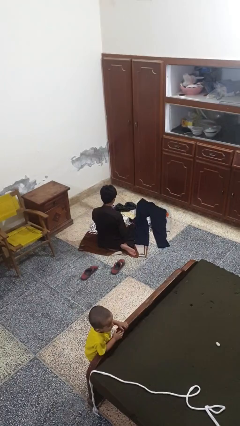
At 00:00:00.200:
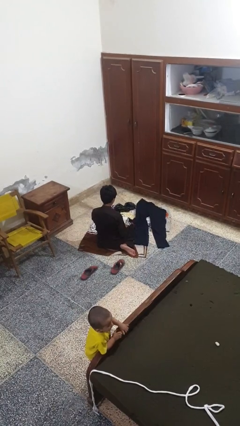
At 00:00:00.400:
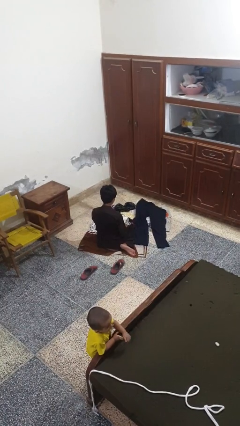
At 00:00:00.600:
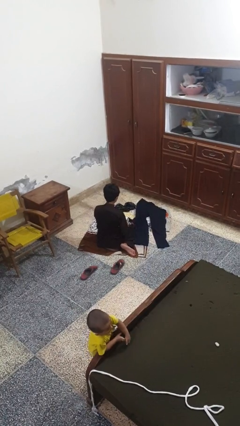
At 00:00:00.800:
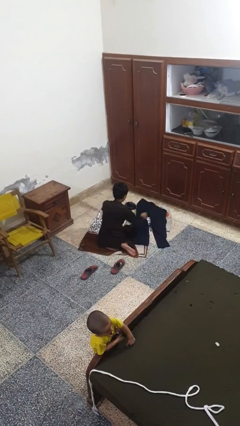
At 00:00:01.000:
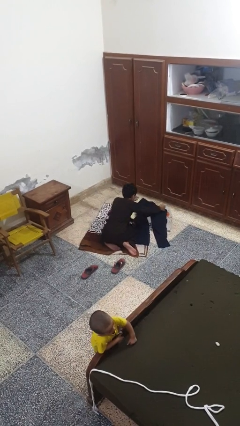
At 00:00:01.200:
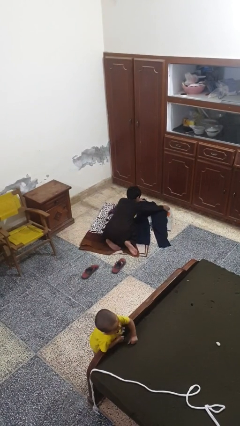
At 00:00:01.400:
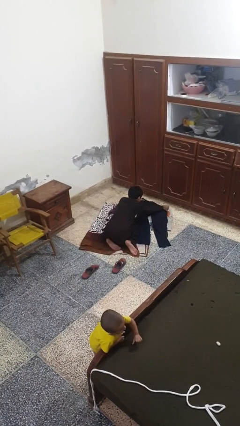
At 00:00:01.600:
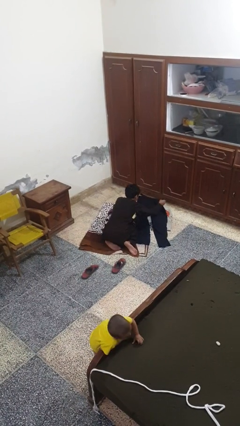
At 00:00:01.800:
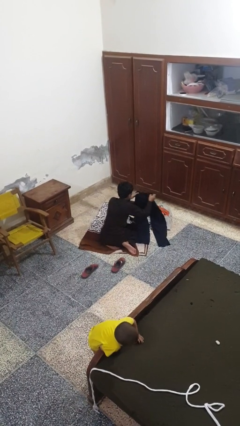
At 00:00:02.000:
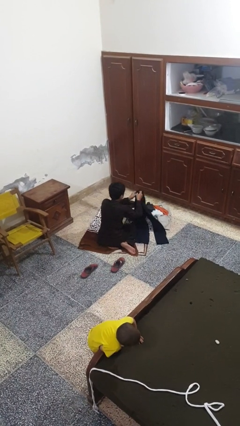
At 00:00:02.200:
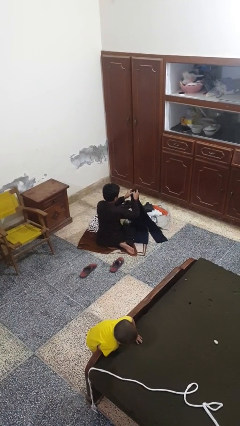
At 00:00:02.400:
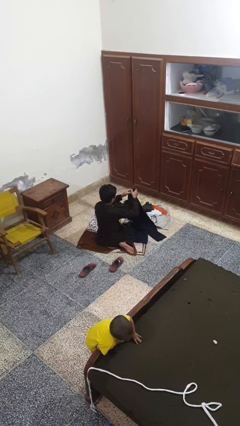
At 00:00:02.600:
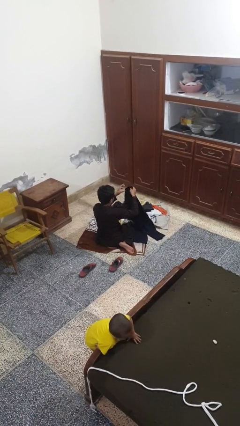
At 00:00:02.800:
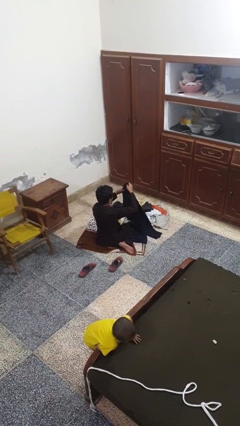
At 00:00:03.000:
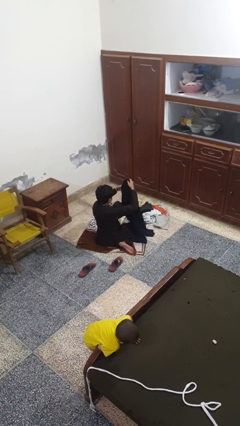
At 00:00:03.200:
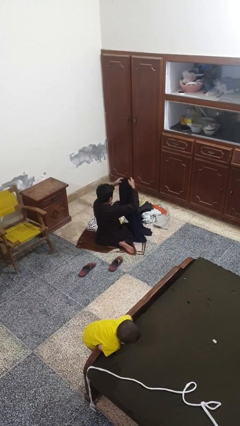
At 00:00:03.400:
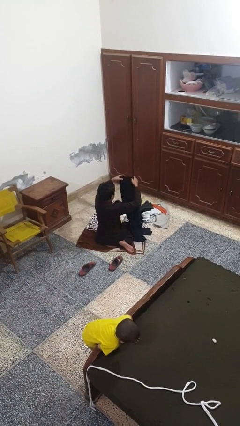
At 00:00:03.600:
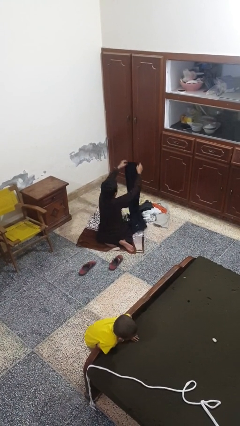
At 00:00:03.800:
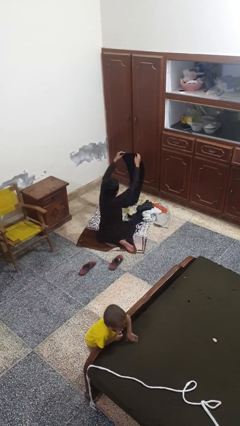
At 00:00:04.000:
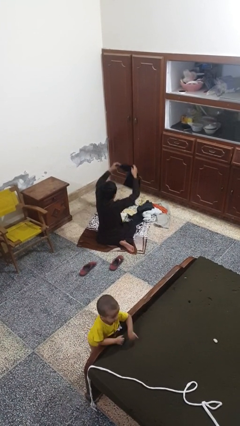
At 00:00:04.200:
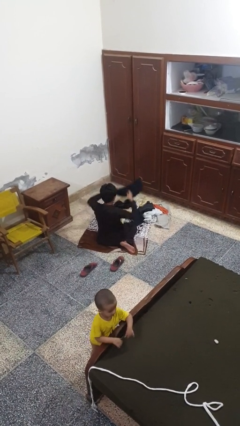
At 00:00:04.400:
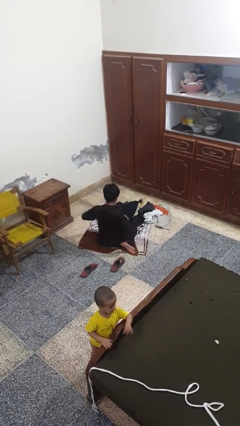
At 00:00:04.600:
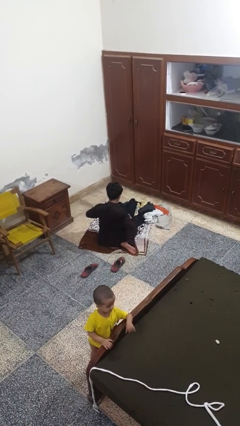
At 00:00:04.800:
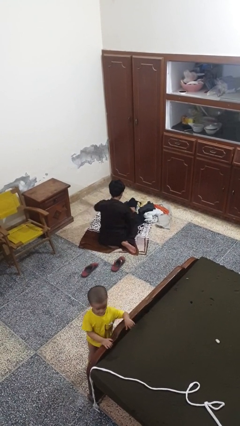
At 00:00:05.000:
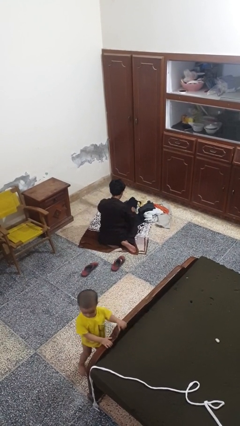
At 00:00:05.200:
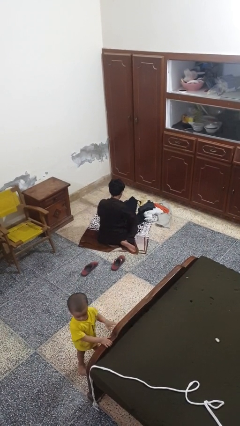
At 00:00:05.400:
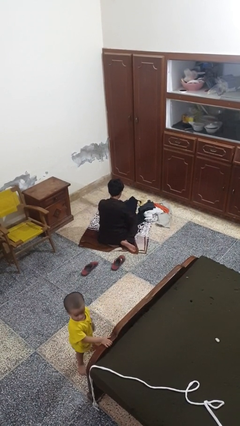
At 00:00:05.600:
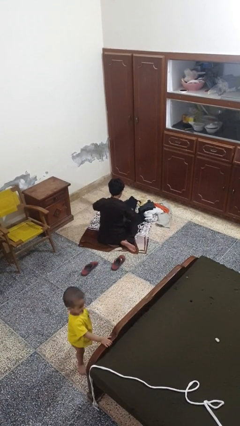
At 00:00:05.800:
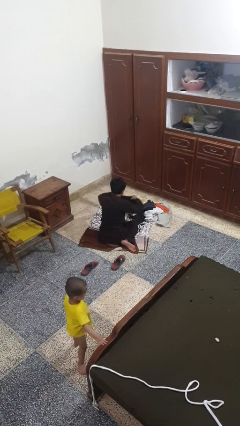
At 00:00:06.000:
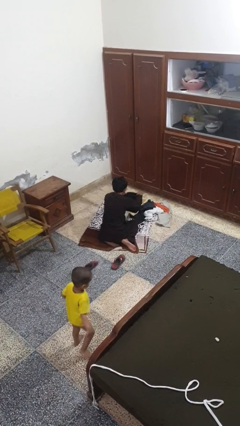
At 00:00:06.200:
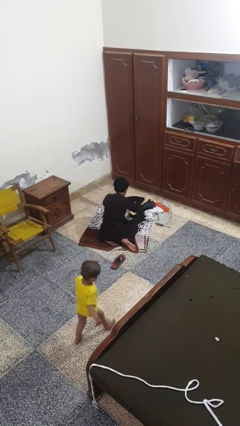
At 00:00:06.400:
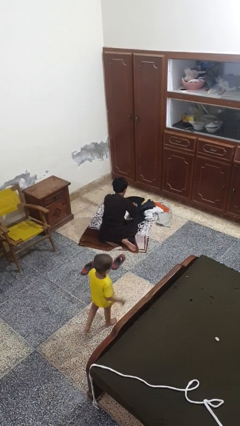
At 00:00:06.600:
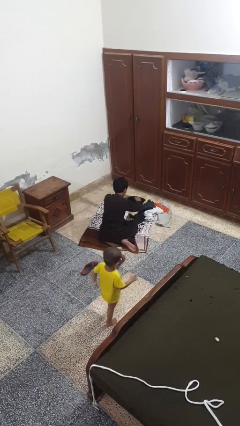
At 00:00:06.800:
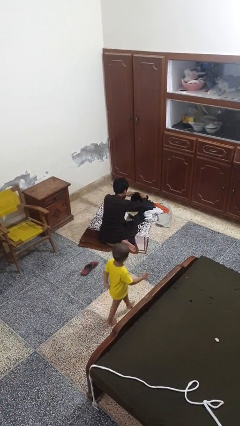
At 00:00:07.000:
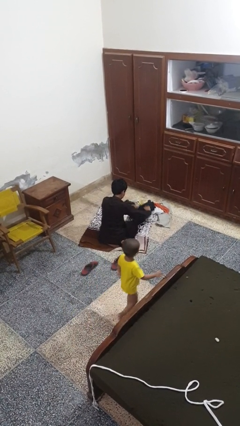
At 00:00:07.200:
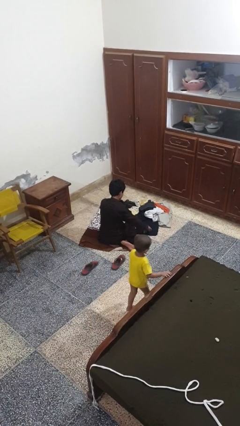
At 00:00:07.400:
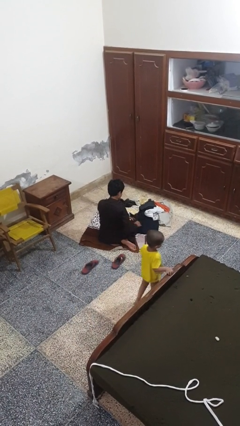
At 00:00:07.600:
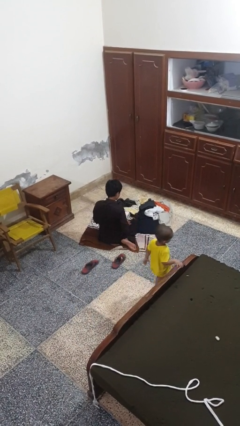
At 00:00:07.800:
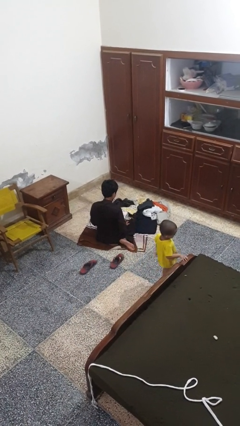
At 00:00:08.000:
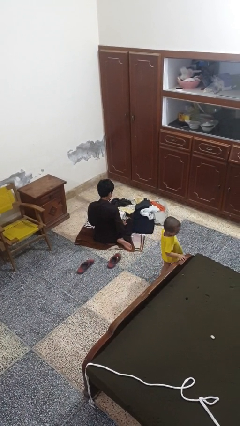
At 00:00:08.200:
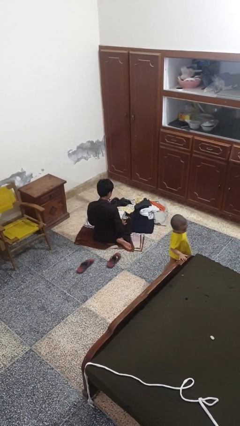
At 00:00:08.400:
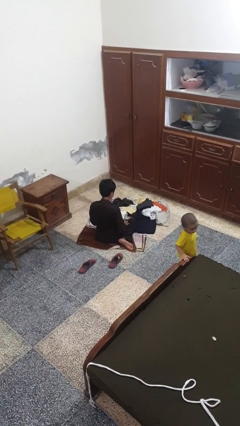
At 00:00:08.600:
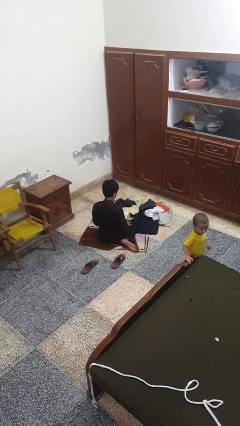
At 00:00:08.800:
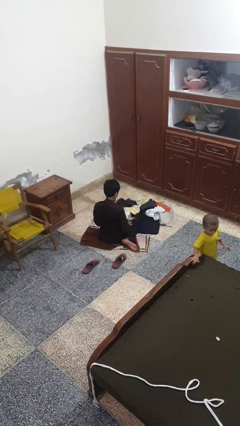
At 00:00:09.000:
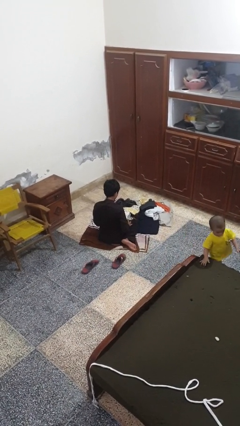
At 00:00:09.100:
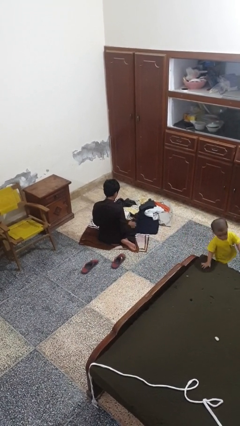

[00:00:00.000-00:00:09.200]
person folds pants

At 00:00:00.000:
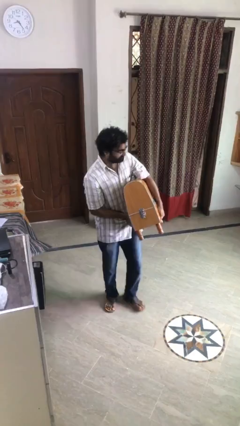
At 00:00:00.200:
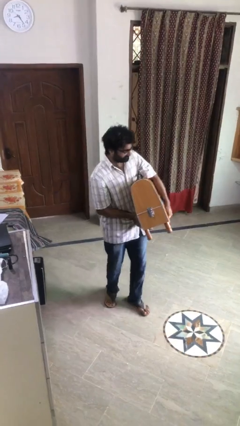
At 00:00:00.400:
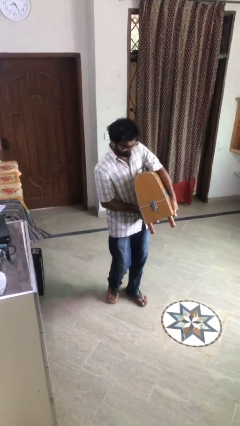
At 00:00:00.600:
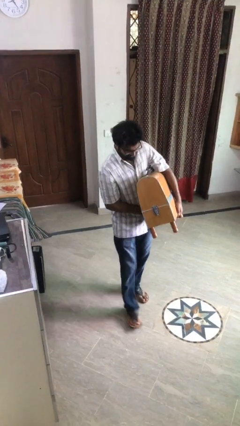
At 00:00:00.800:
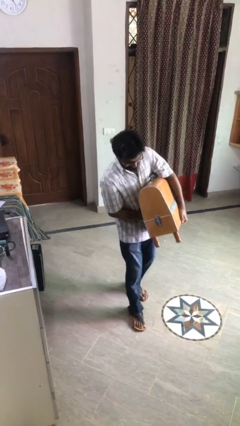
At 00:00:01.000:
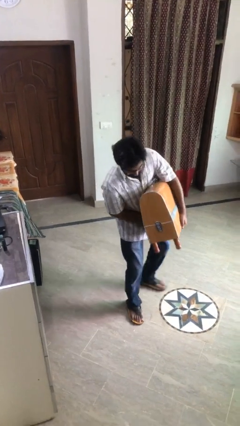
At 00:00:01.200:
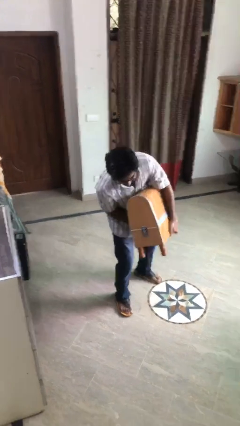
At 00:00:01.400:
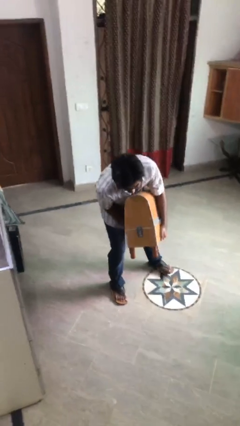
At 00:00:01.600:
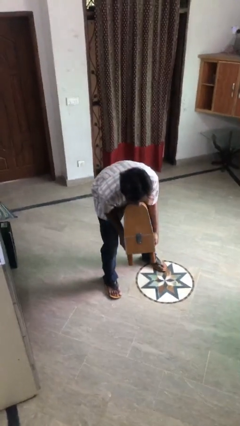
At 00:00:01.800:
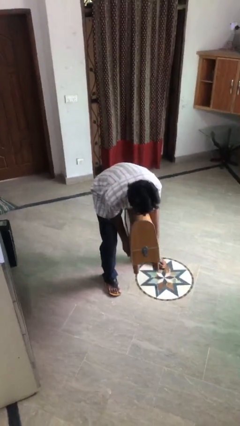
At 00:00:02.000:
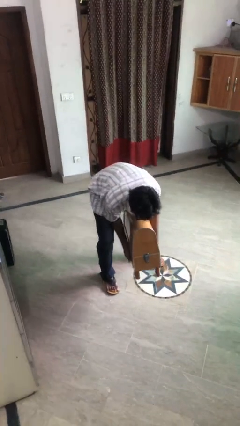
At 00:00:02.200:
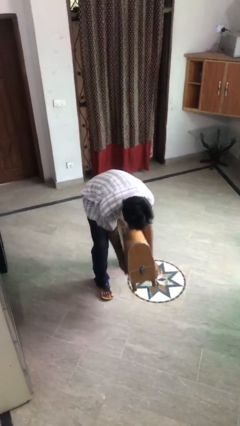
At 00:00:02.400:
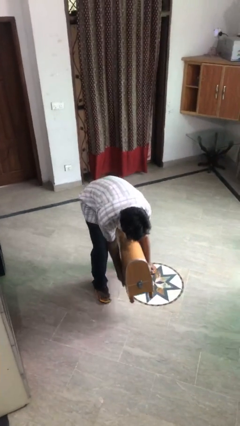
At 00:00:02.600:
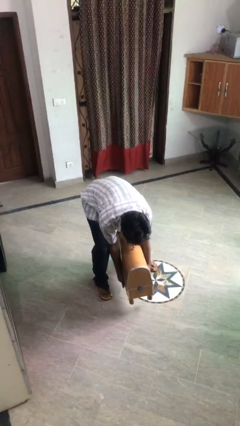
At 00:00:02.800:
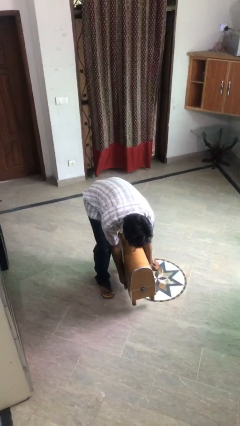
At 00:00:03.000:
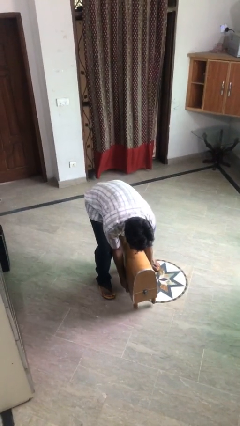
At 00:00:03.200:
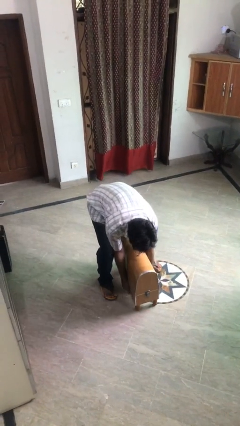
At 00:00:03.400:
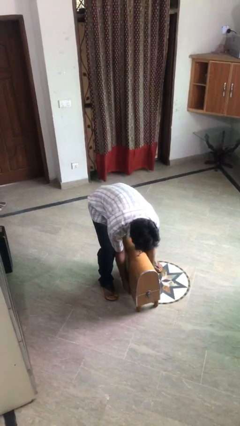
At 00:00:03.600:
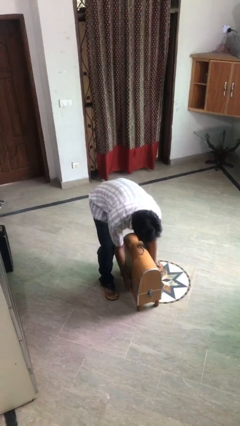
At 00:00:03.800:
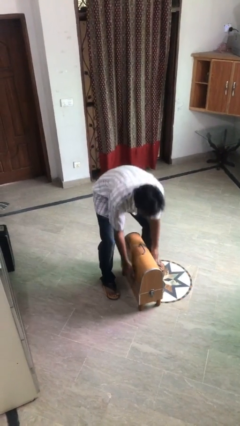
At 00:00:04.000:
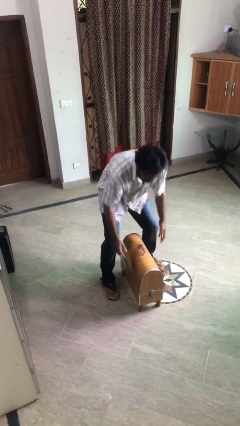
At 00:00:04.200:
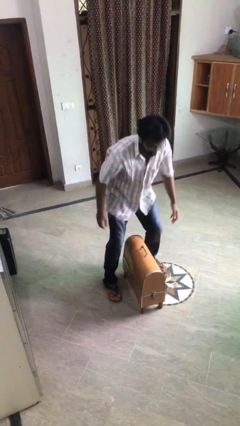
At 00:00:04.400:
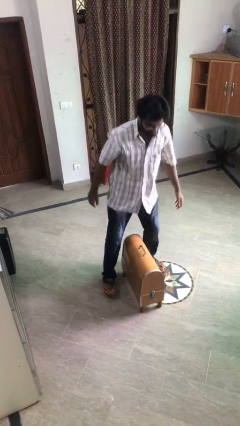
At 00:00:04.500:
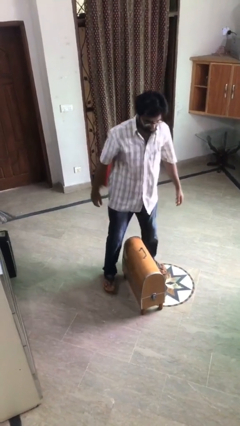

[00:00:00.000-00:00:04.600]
person puts down object on floor

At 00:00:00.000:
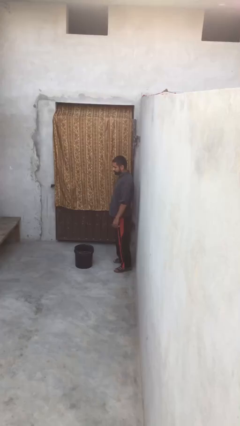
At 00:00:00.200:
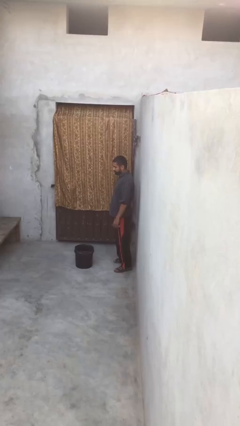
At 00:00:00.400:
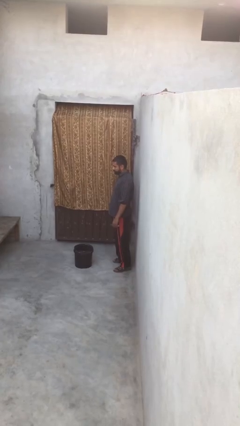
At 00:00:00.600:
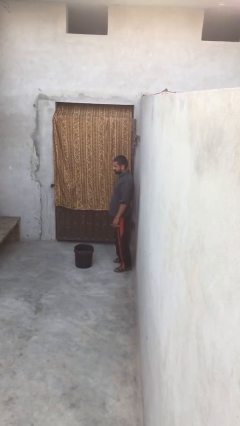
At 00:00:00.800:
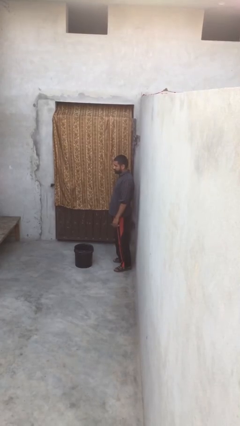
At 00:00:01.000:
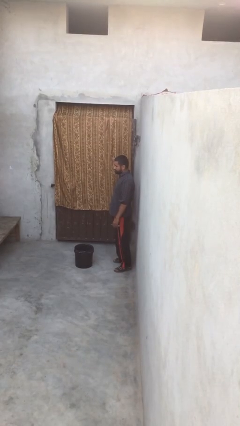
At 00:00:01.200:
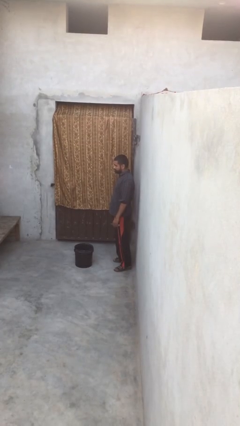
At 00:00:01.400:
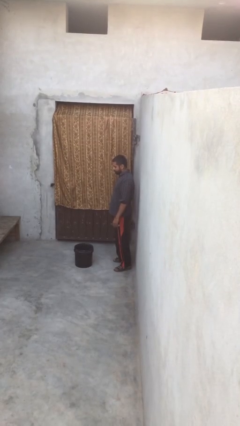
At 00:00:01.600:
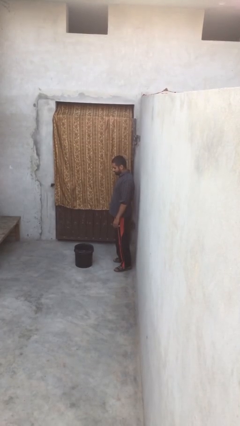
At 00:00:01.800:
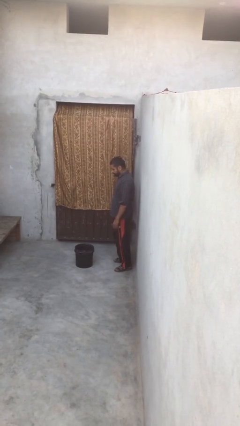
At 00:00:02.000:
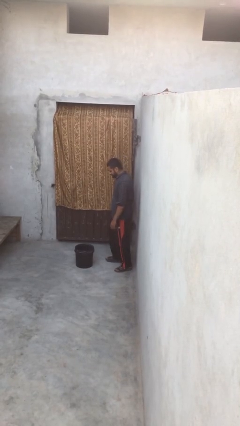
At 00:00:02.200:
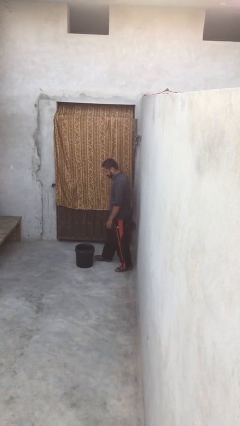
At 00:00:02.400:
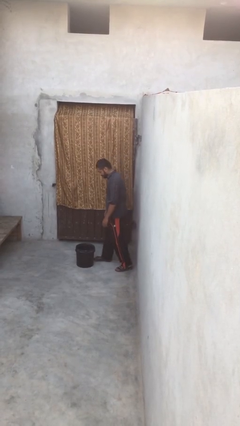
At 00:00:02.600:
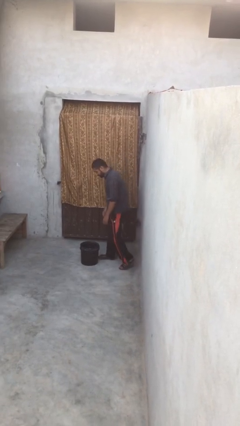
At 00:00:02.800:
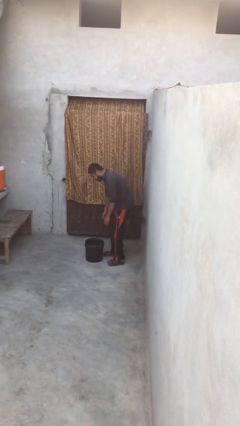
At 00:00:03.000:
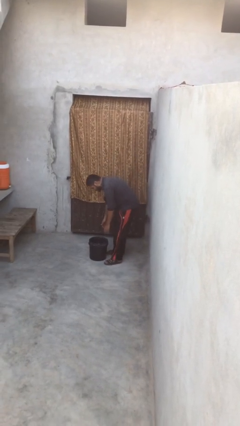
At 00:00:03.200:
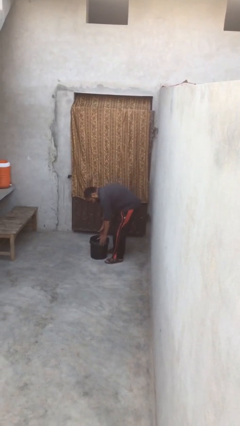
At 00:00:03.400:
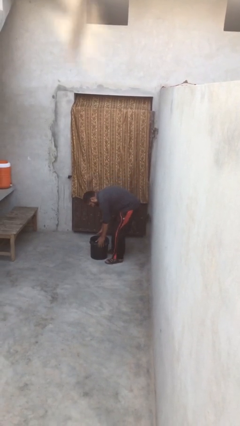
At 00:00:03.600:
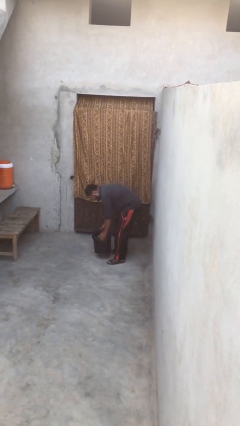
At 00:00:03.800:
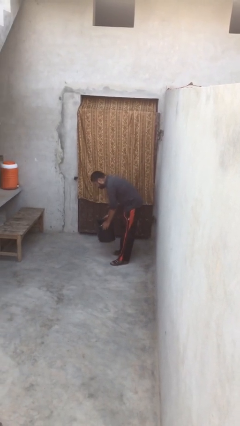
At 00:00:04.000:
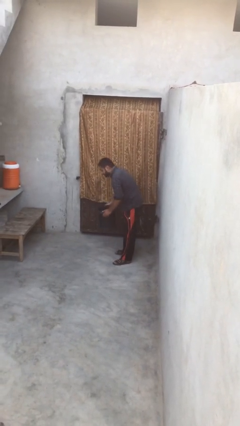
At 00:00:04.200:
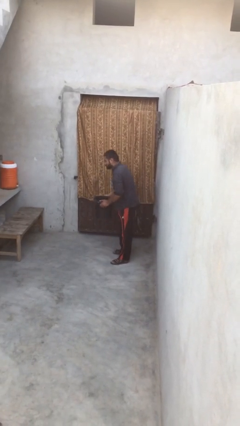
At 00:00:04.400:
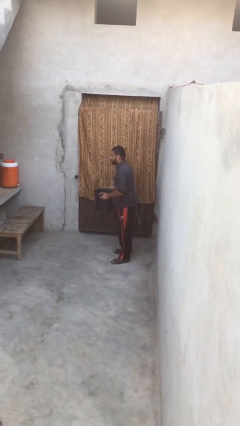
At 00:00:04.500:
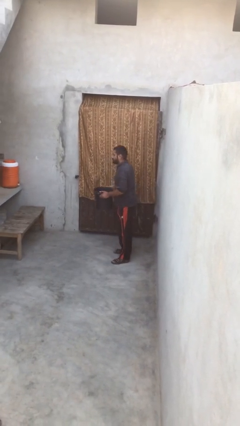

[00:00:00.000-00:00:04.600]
person picks up object from floor
